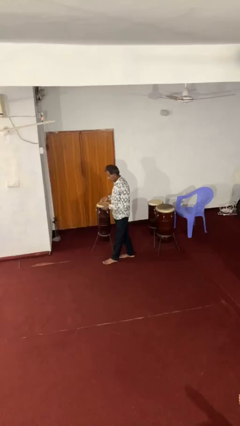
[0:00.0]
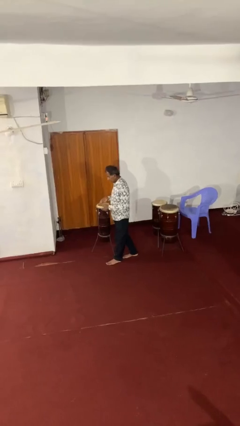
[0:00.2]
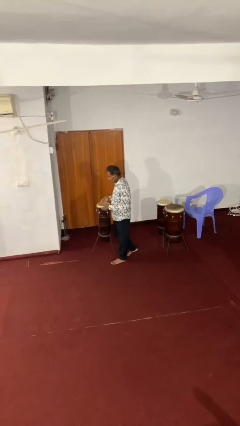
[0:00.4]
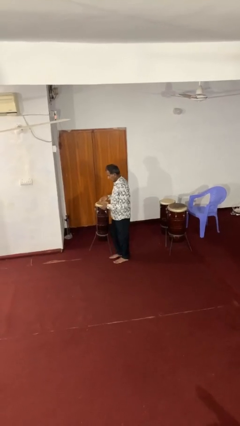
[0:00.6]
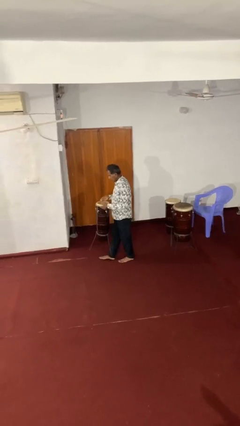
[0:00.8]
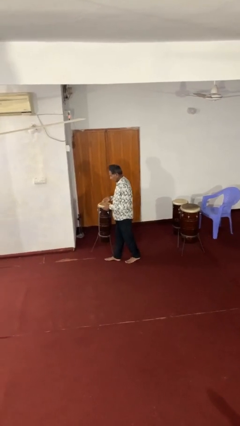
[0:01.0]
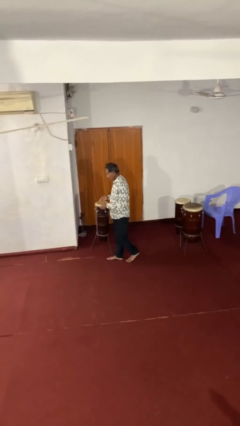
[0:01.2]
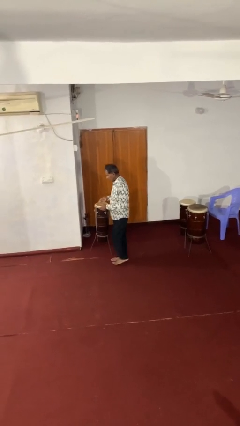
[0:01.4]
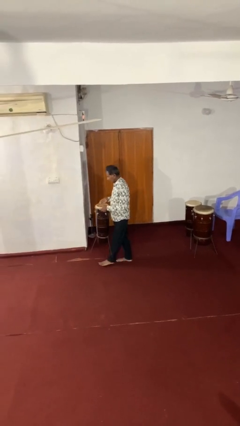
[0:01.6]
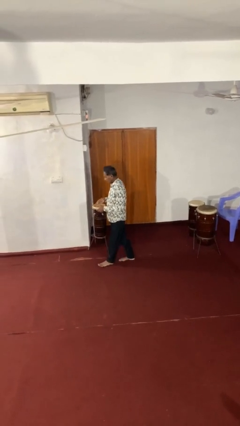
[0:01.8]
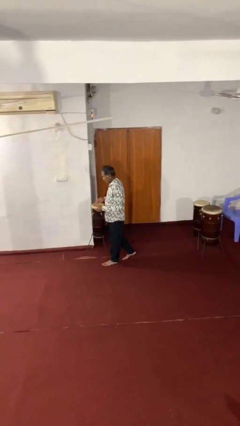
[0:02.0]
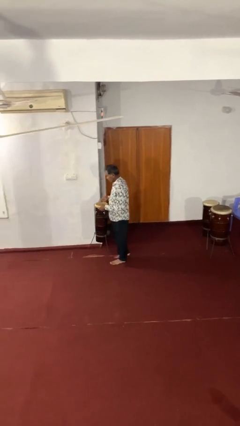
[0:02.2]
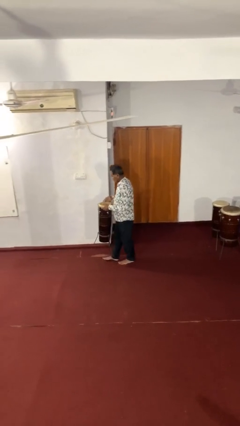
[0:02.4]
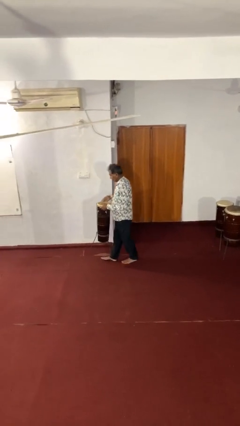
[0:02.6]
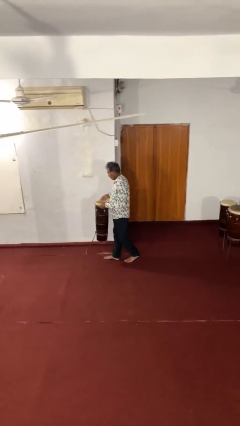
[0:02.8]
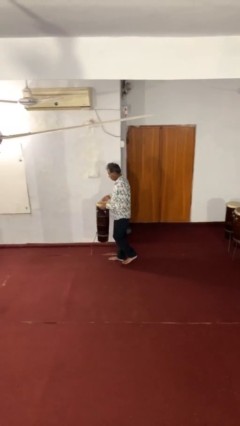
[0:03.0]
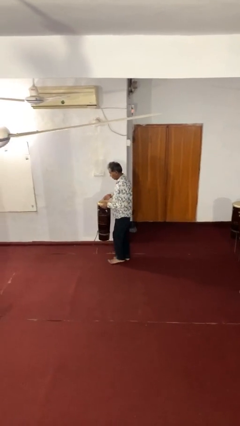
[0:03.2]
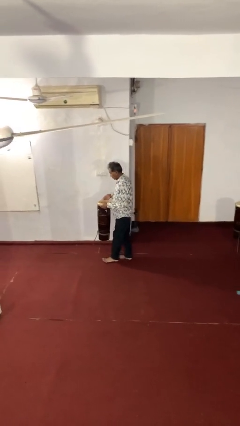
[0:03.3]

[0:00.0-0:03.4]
person carries heavy object

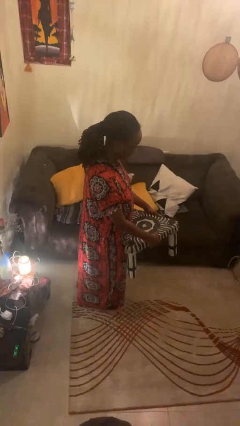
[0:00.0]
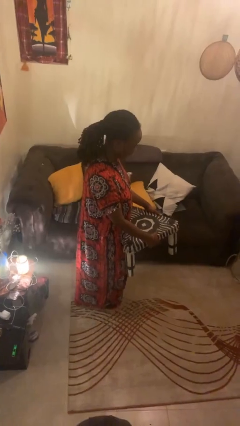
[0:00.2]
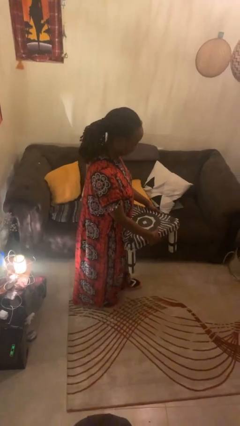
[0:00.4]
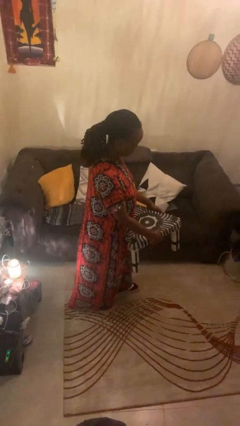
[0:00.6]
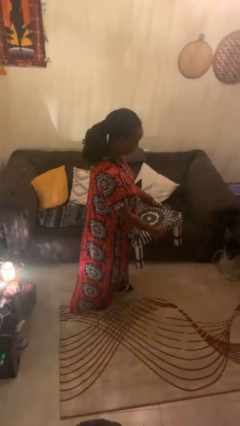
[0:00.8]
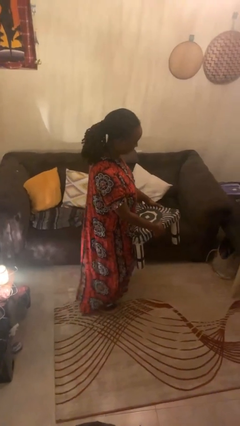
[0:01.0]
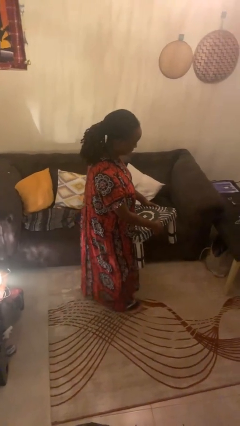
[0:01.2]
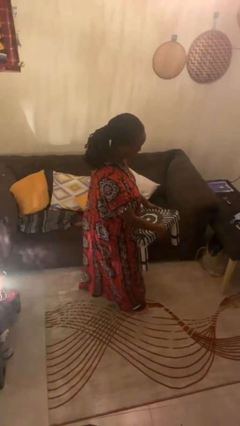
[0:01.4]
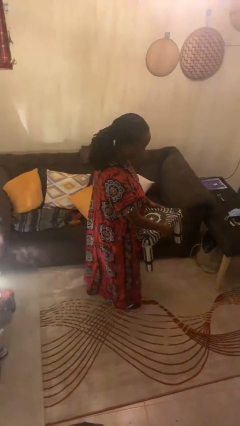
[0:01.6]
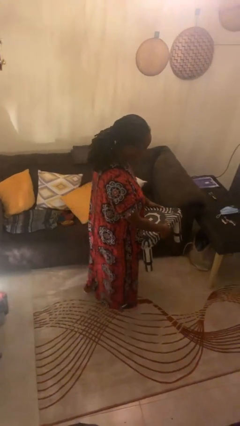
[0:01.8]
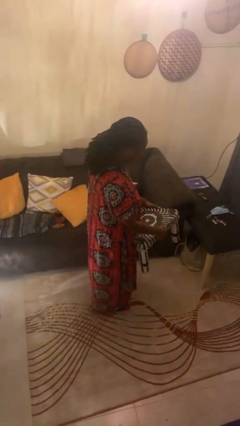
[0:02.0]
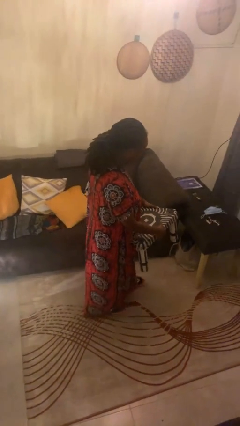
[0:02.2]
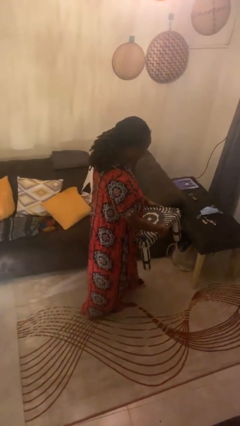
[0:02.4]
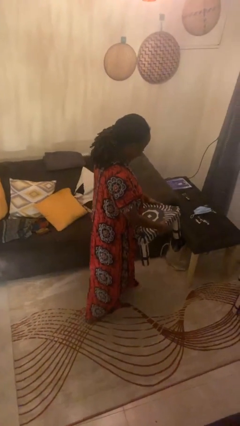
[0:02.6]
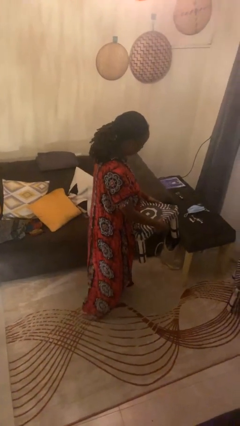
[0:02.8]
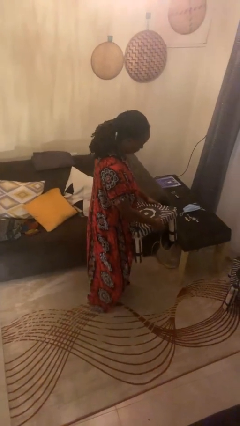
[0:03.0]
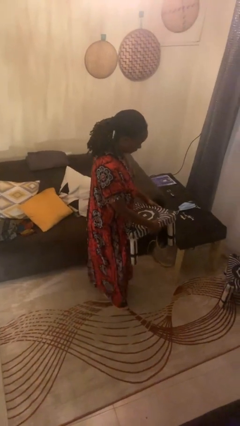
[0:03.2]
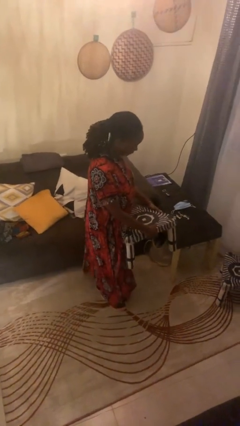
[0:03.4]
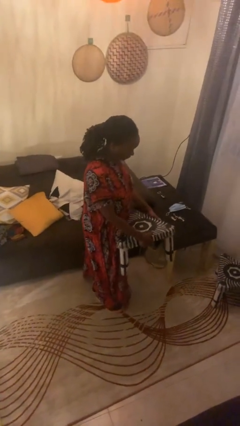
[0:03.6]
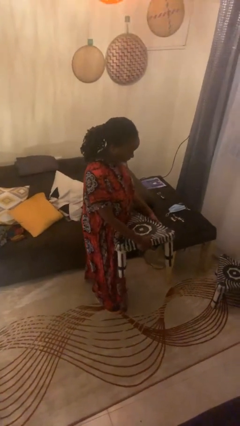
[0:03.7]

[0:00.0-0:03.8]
person carries furniture

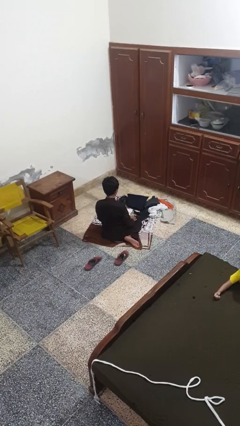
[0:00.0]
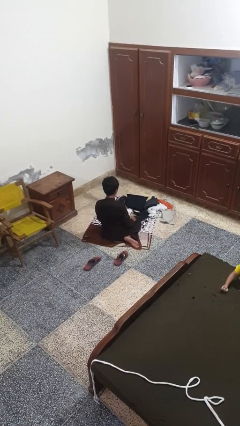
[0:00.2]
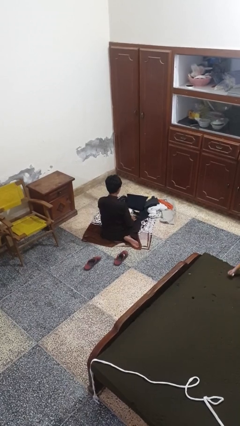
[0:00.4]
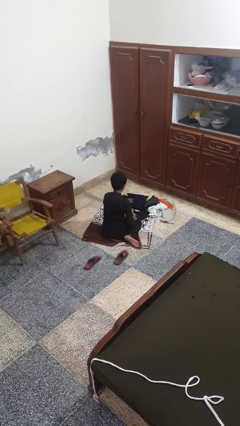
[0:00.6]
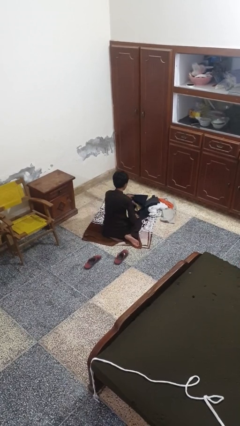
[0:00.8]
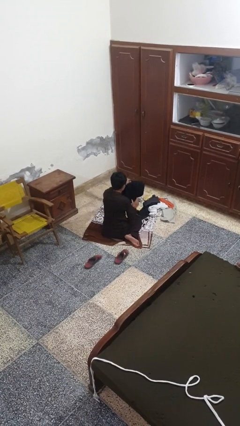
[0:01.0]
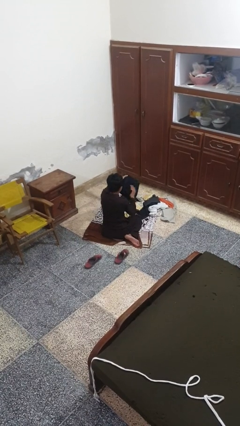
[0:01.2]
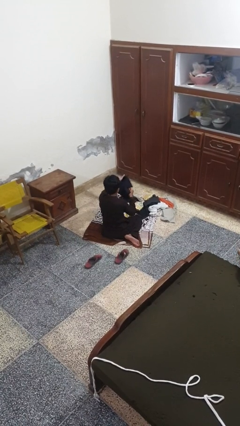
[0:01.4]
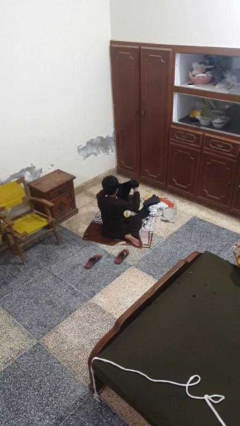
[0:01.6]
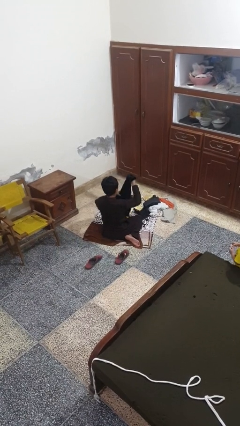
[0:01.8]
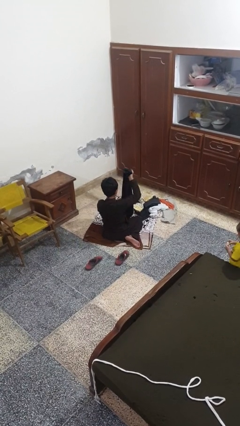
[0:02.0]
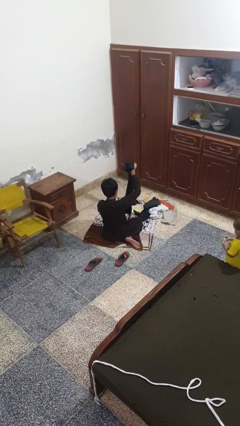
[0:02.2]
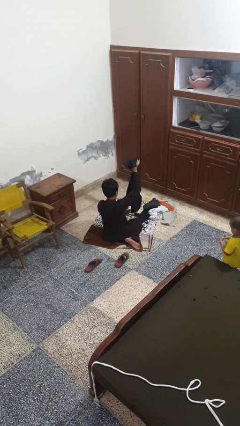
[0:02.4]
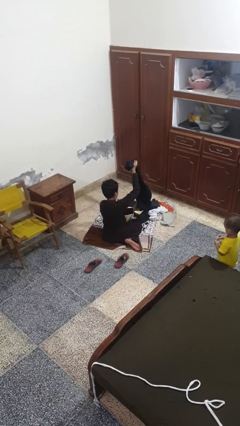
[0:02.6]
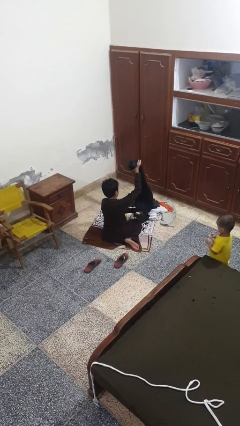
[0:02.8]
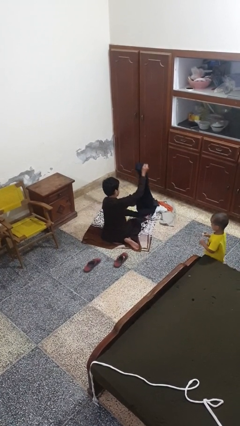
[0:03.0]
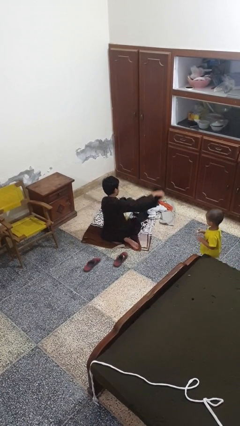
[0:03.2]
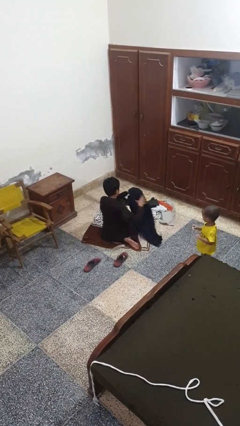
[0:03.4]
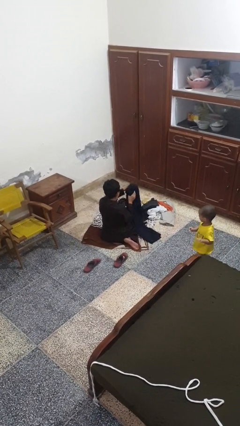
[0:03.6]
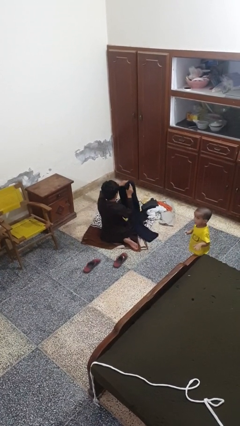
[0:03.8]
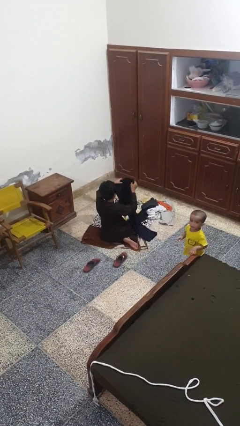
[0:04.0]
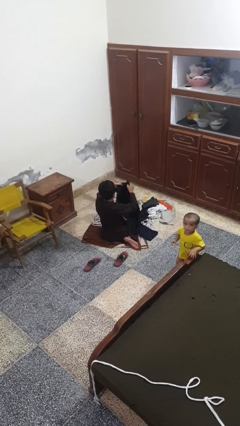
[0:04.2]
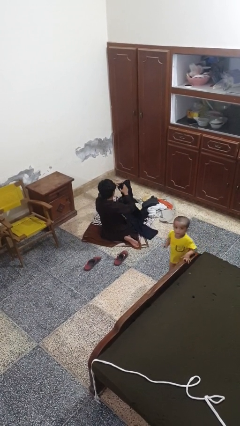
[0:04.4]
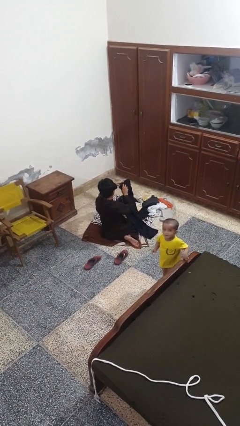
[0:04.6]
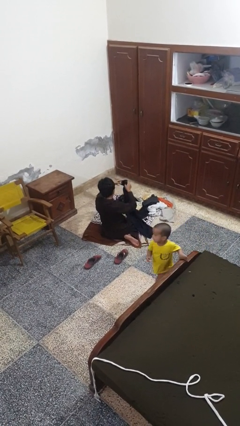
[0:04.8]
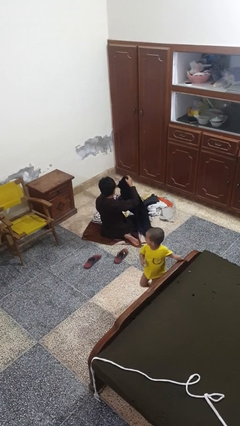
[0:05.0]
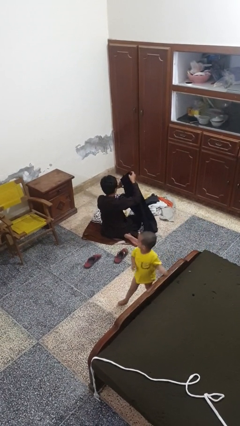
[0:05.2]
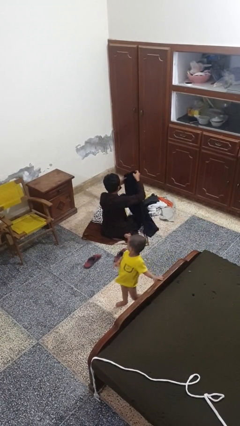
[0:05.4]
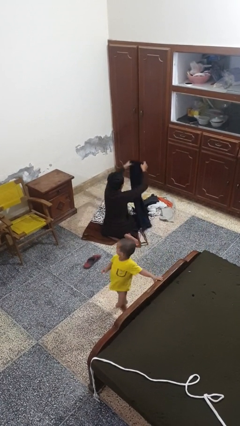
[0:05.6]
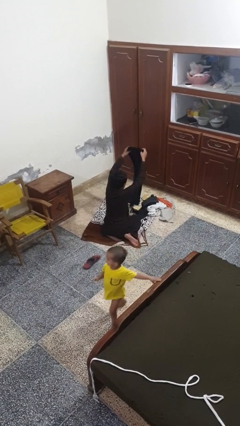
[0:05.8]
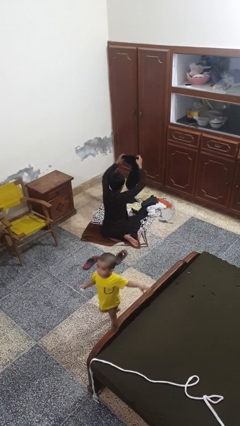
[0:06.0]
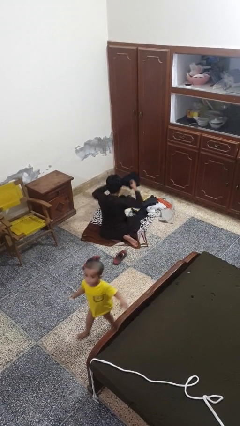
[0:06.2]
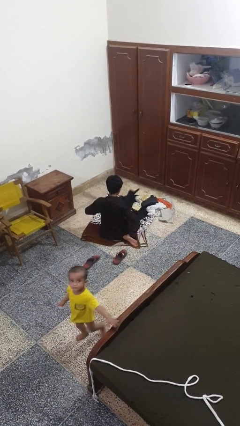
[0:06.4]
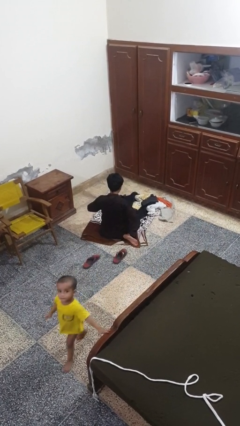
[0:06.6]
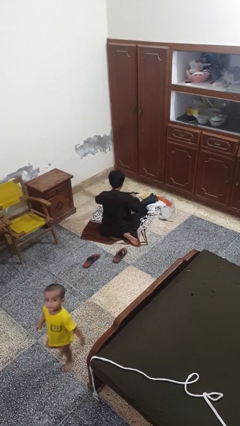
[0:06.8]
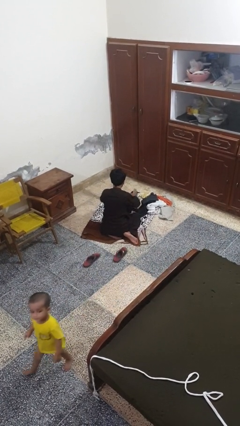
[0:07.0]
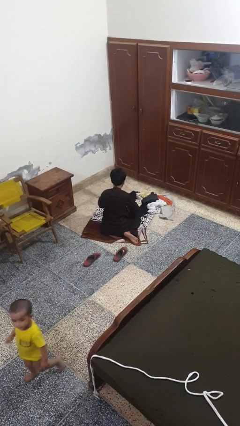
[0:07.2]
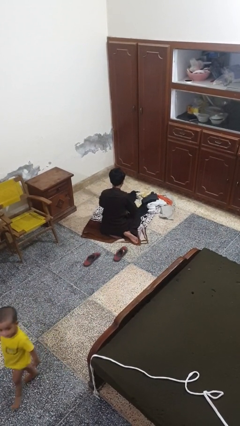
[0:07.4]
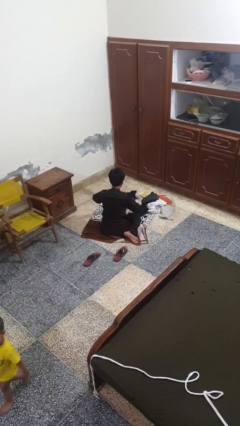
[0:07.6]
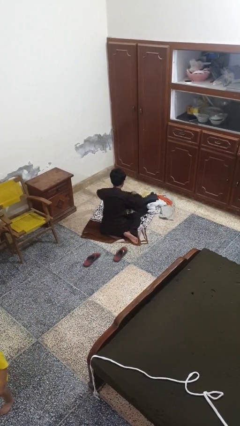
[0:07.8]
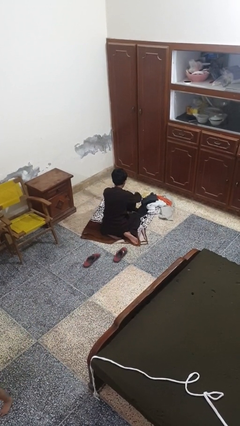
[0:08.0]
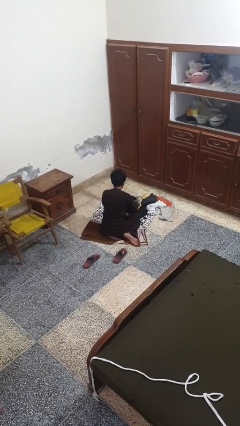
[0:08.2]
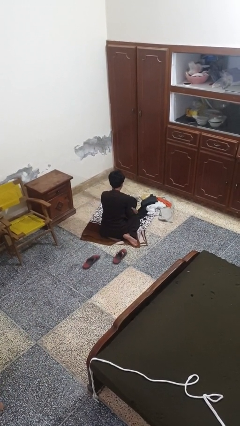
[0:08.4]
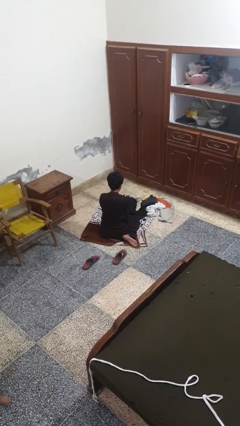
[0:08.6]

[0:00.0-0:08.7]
person folds pants

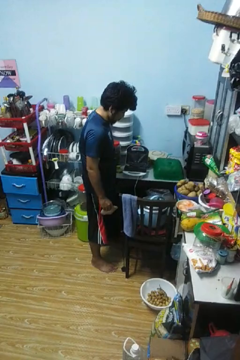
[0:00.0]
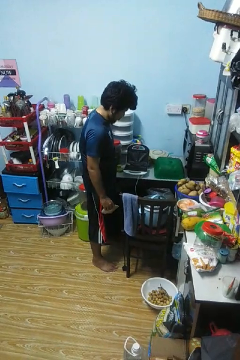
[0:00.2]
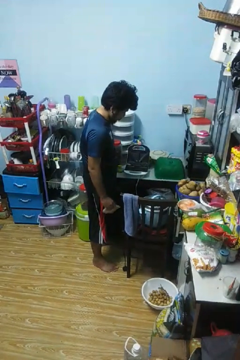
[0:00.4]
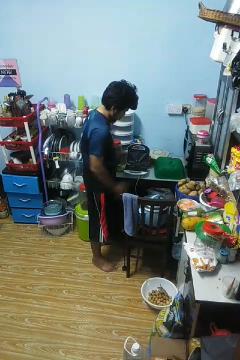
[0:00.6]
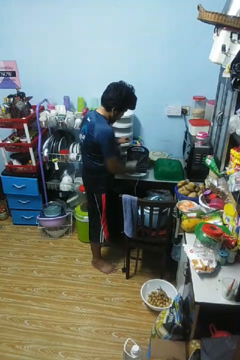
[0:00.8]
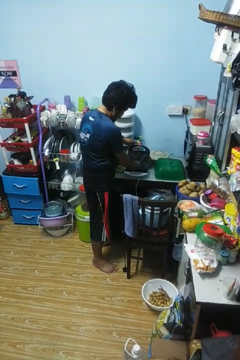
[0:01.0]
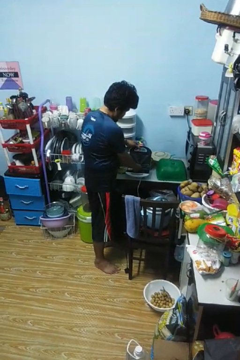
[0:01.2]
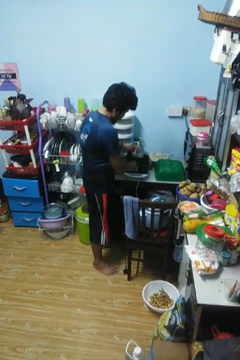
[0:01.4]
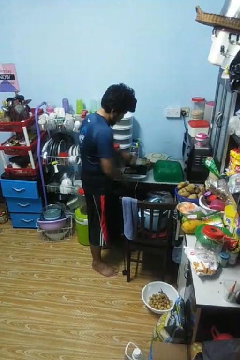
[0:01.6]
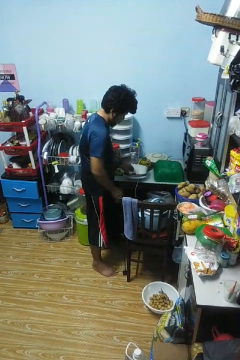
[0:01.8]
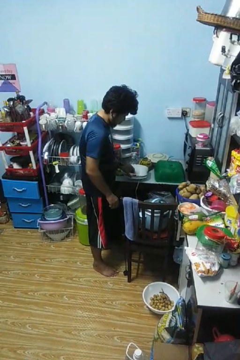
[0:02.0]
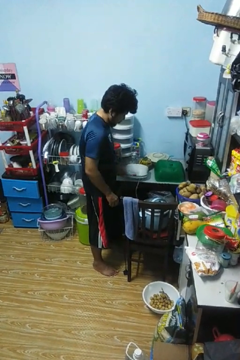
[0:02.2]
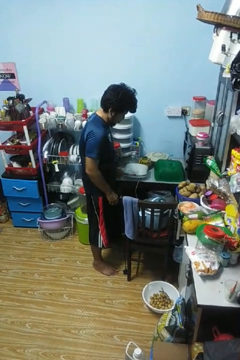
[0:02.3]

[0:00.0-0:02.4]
person puts object into toaster
